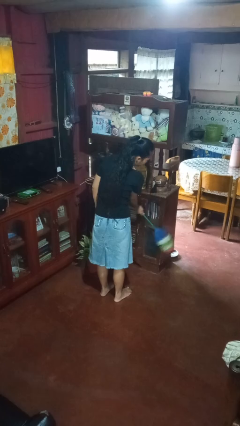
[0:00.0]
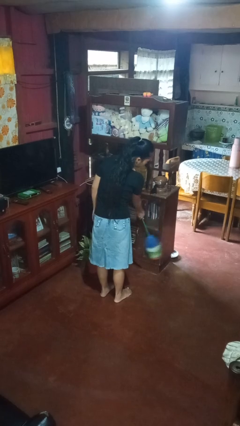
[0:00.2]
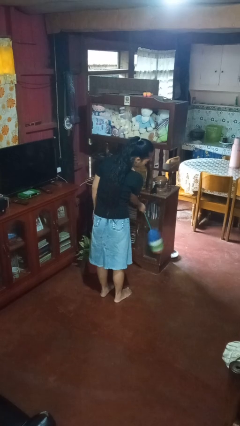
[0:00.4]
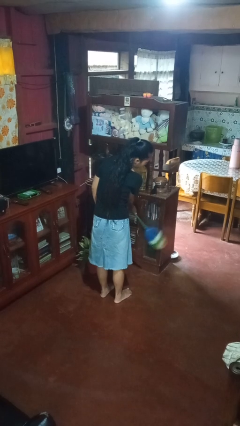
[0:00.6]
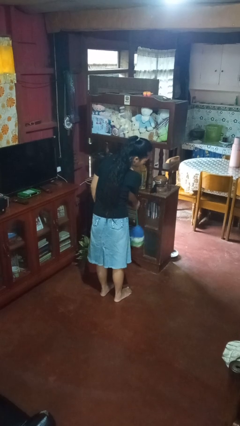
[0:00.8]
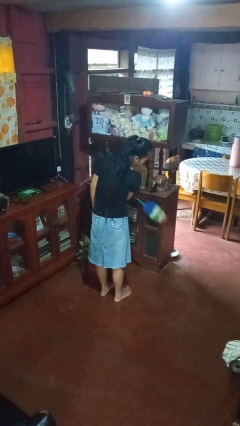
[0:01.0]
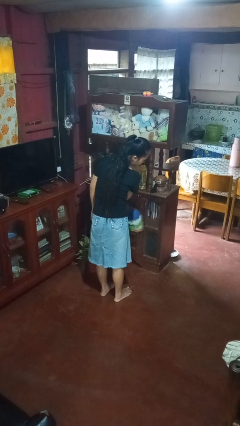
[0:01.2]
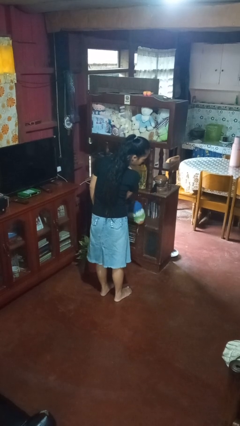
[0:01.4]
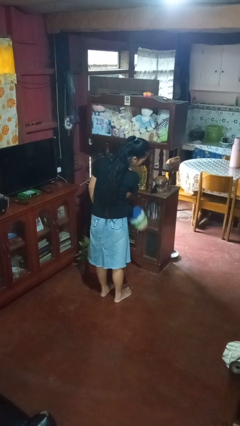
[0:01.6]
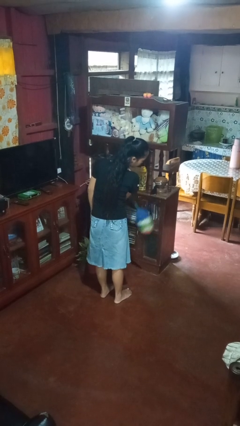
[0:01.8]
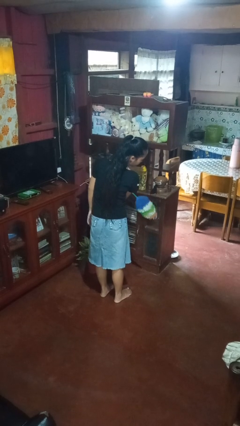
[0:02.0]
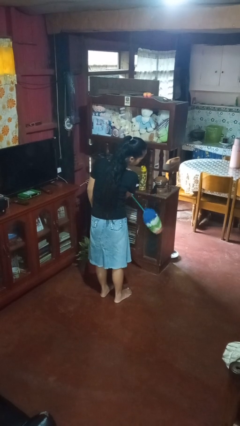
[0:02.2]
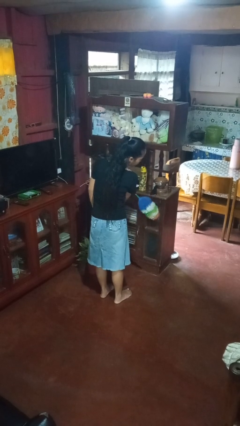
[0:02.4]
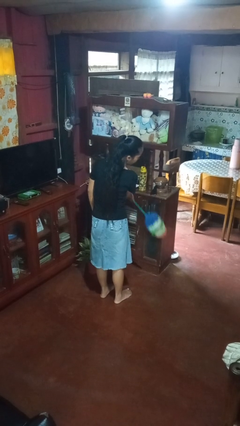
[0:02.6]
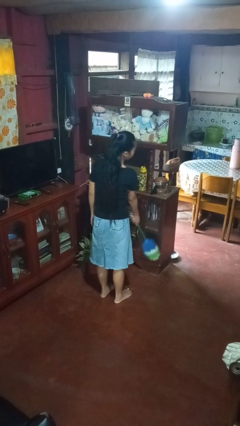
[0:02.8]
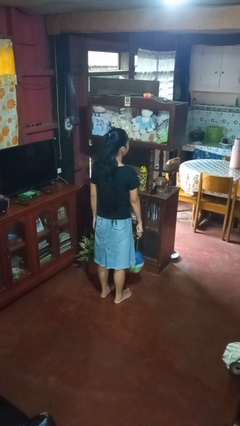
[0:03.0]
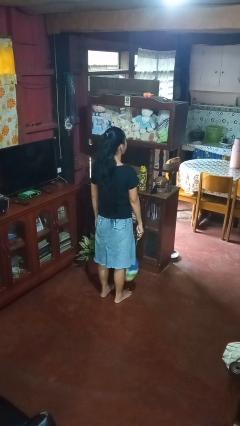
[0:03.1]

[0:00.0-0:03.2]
person dusts furniture

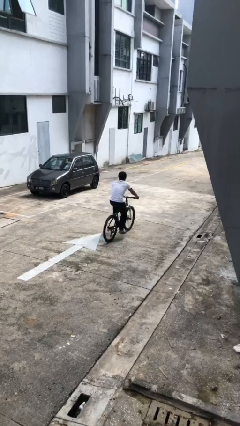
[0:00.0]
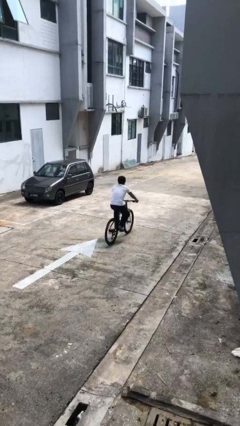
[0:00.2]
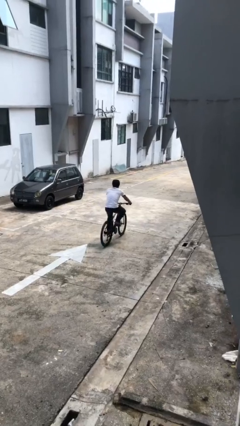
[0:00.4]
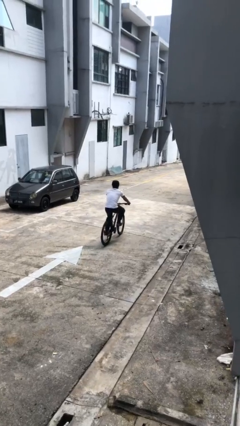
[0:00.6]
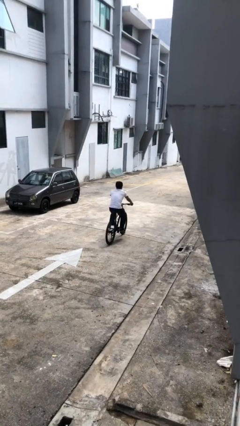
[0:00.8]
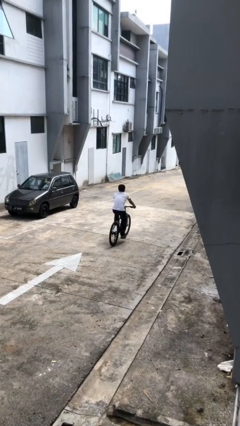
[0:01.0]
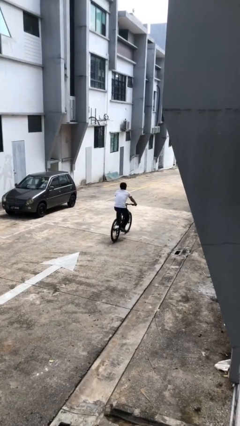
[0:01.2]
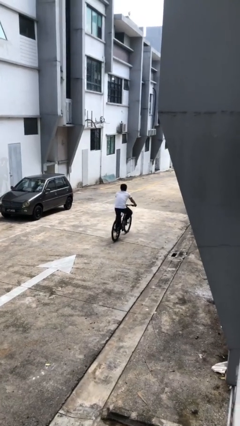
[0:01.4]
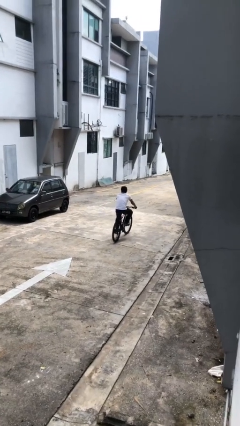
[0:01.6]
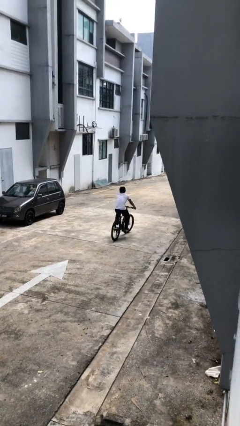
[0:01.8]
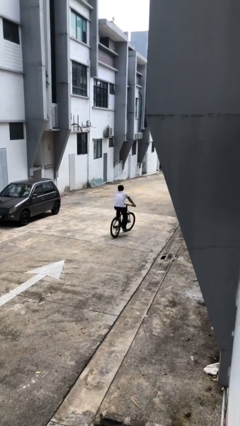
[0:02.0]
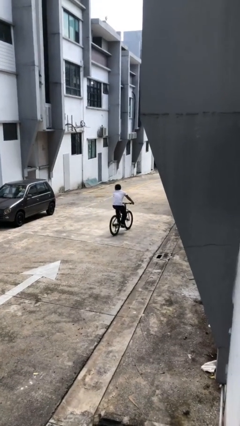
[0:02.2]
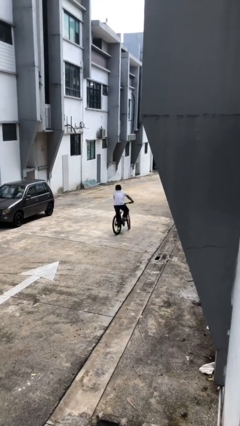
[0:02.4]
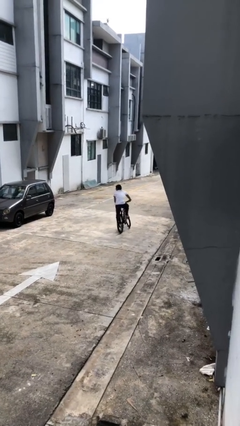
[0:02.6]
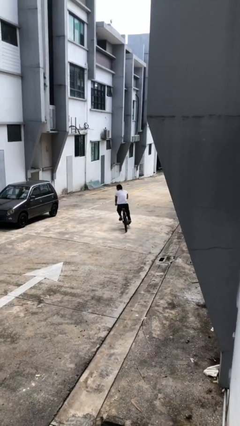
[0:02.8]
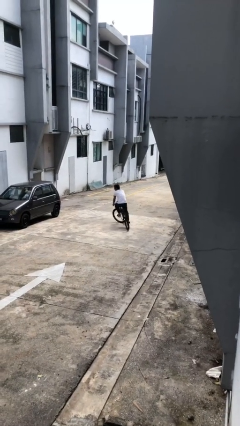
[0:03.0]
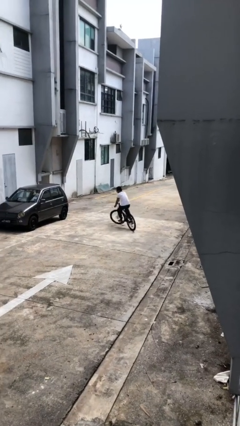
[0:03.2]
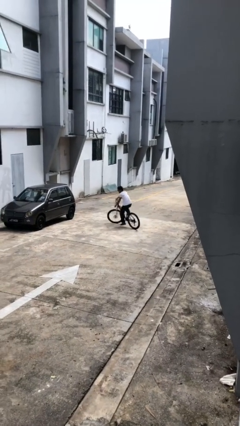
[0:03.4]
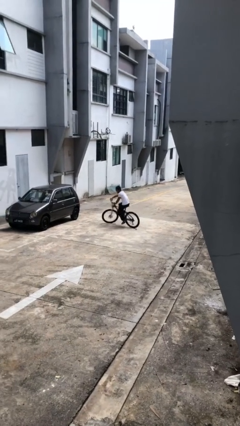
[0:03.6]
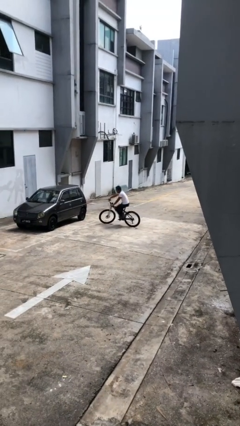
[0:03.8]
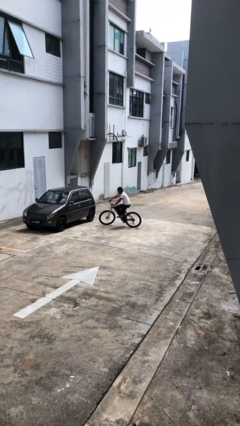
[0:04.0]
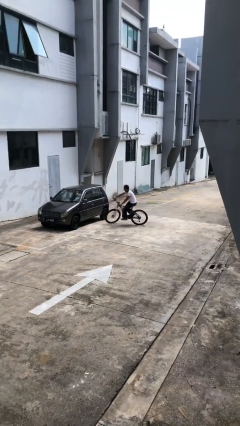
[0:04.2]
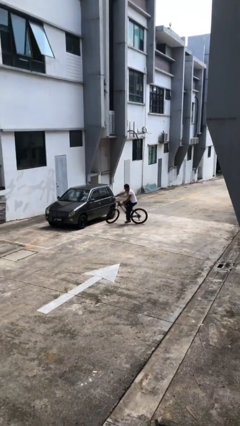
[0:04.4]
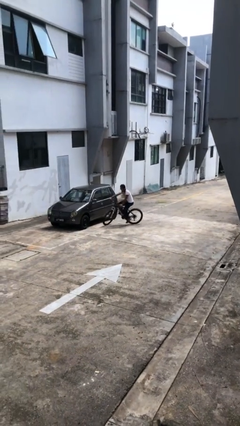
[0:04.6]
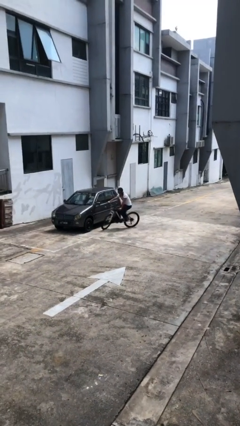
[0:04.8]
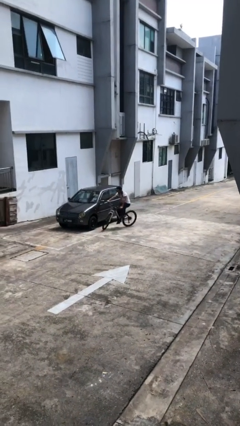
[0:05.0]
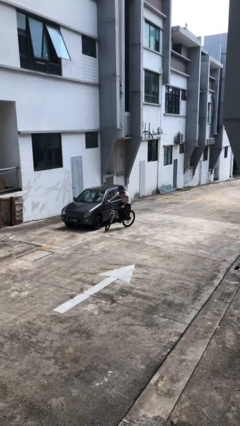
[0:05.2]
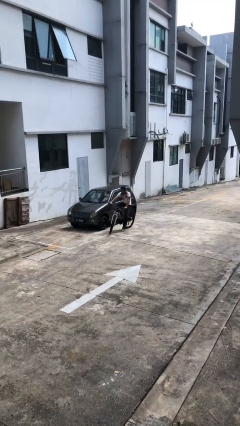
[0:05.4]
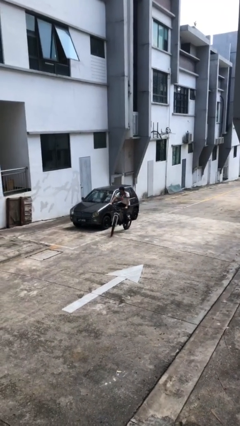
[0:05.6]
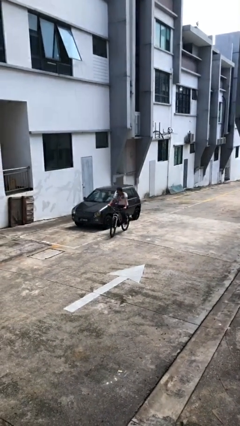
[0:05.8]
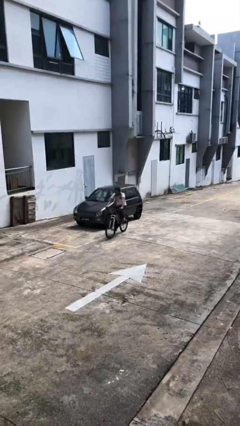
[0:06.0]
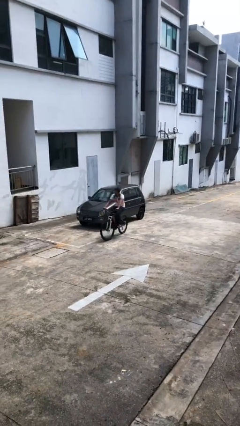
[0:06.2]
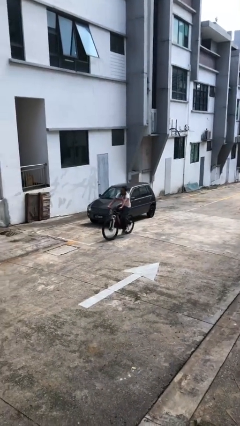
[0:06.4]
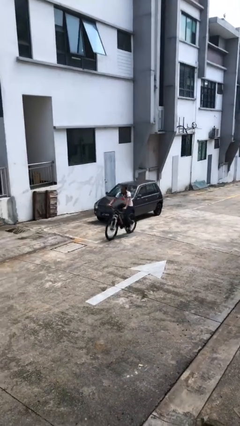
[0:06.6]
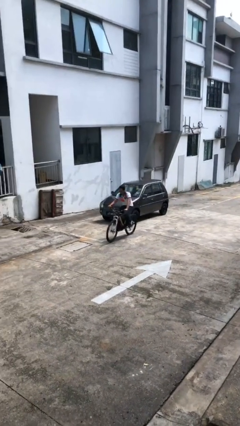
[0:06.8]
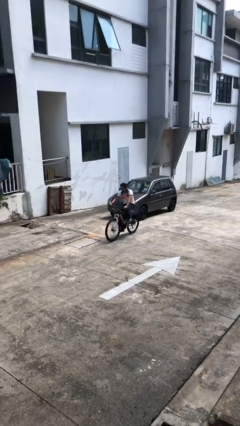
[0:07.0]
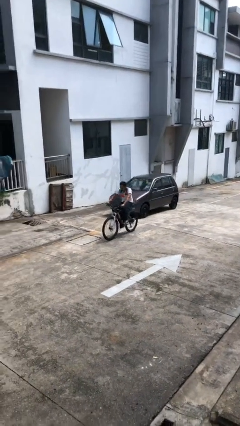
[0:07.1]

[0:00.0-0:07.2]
person rides bicycle

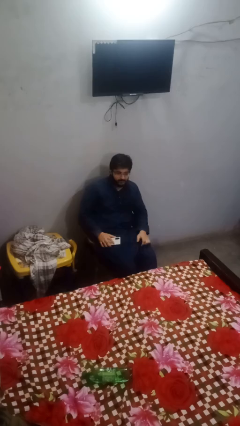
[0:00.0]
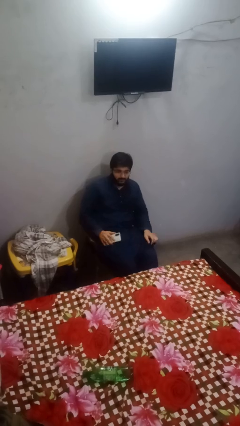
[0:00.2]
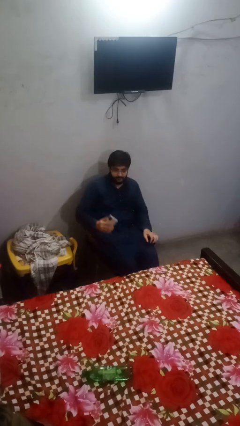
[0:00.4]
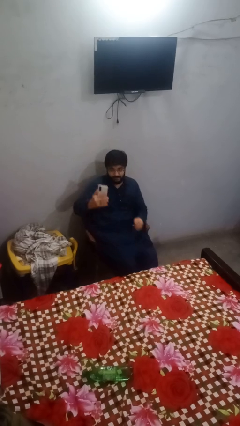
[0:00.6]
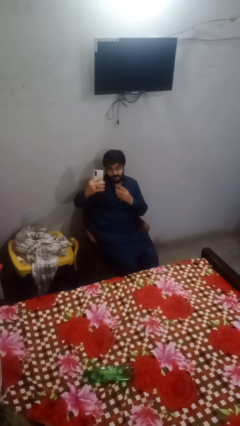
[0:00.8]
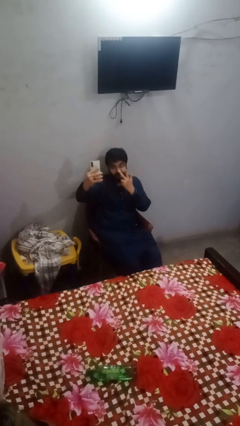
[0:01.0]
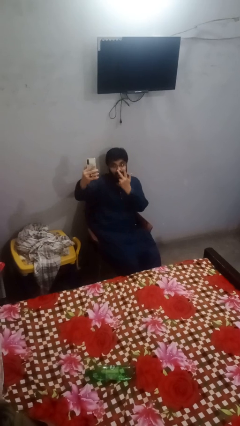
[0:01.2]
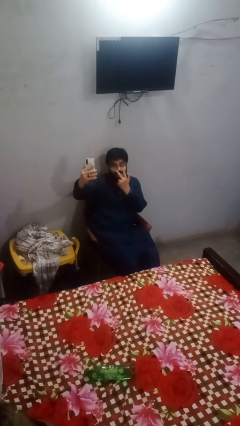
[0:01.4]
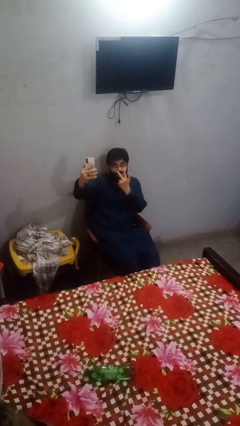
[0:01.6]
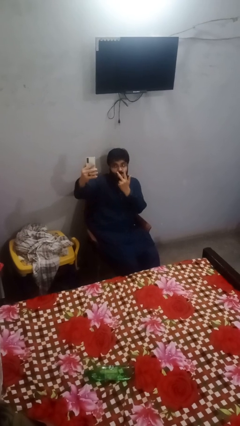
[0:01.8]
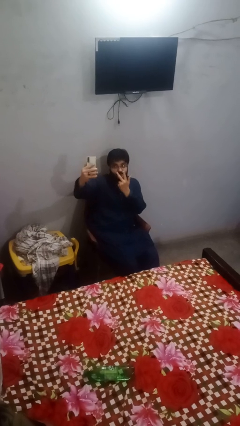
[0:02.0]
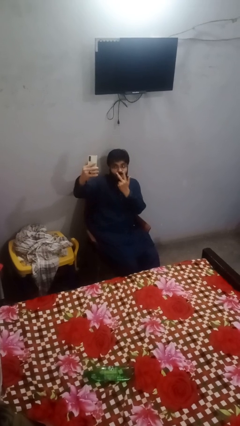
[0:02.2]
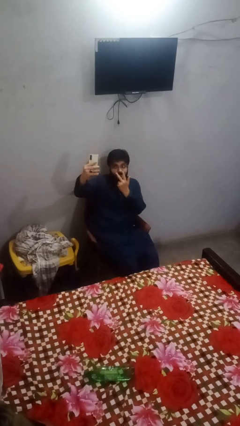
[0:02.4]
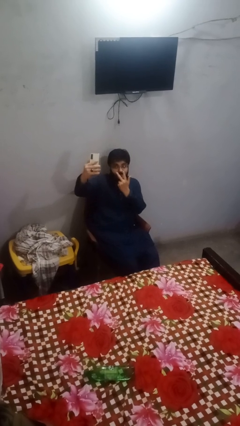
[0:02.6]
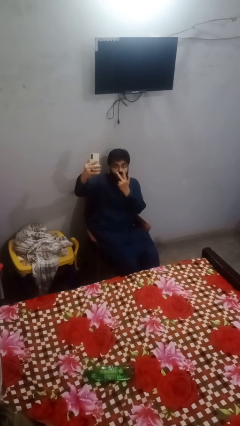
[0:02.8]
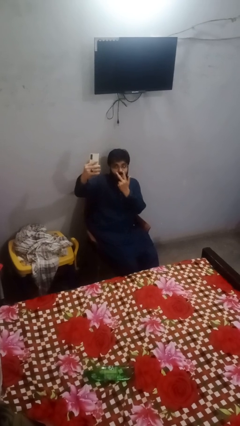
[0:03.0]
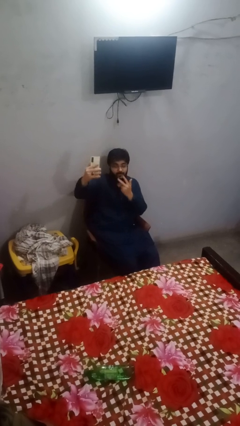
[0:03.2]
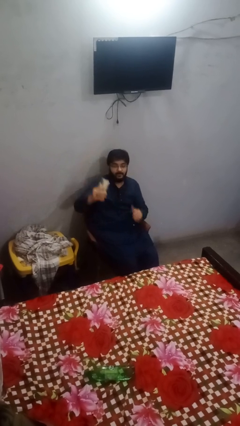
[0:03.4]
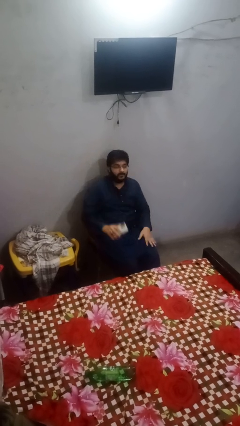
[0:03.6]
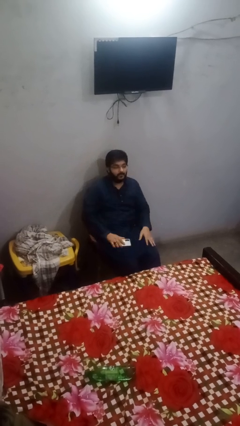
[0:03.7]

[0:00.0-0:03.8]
person takes selfie

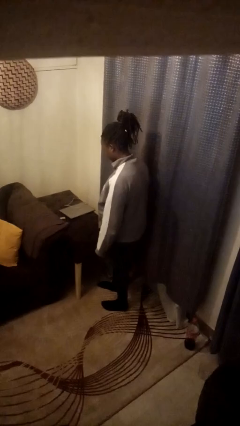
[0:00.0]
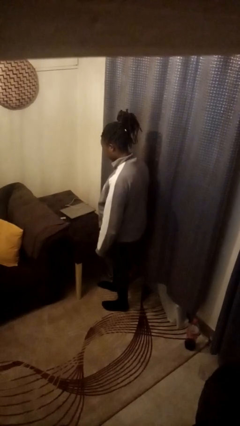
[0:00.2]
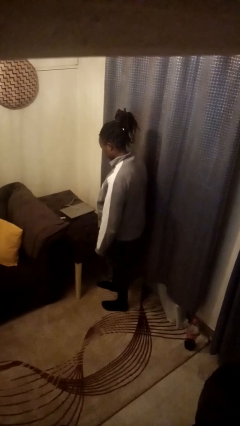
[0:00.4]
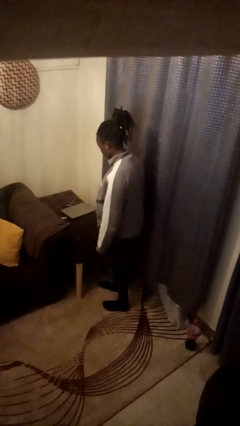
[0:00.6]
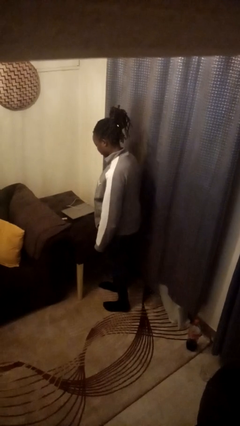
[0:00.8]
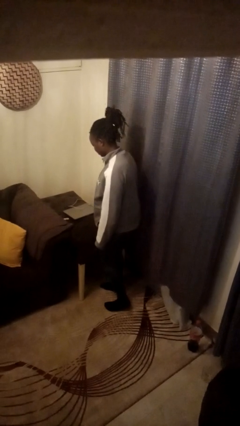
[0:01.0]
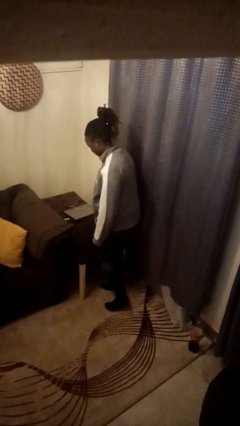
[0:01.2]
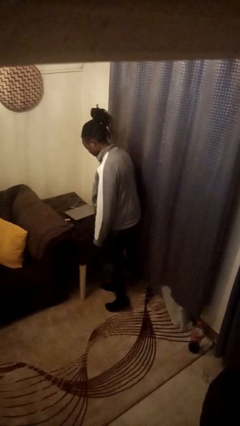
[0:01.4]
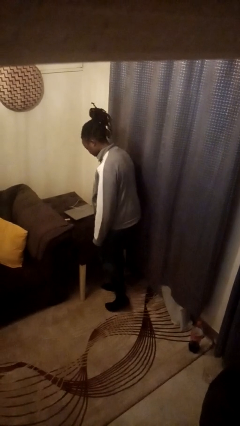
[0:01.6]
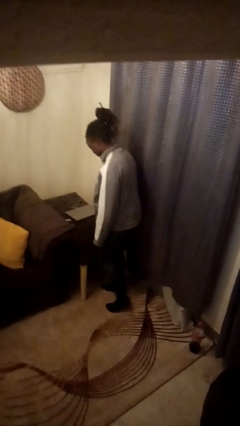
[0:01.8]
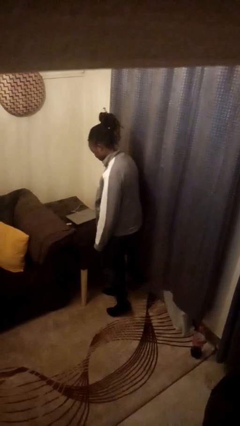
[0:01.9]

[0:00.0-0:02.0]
person bumps into table

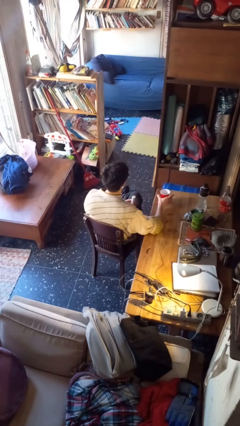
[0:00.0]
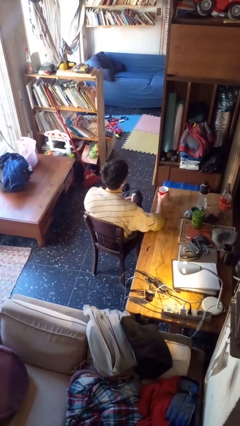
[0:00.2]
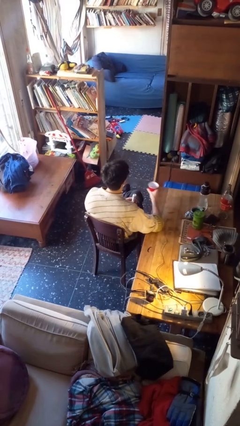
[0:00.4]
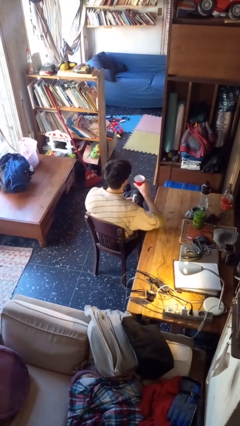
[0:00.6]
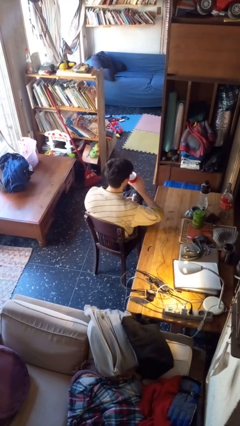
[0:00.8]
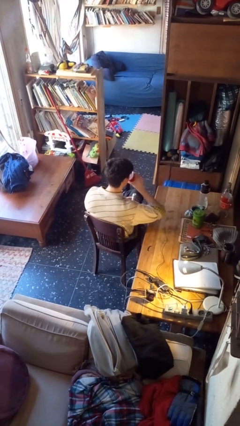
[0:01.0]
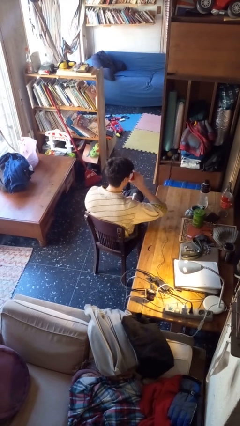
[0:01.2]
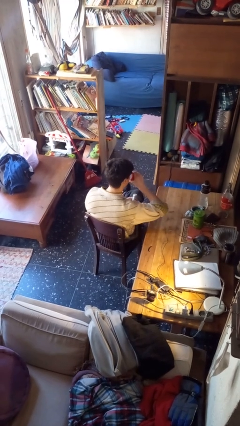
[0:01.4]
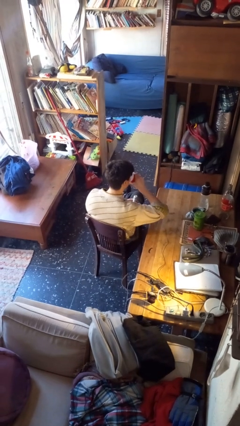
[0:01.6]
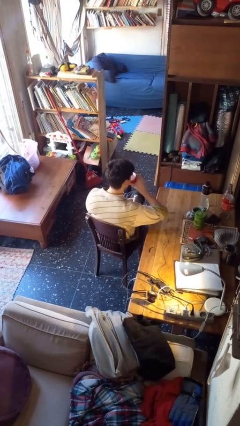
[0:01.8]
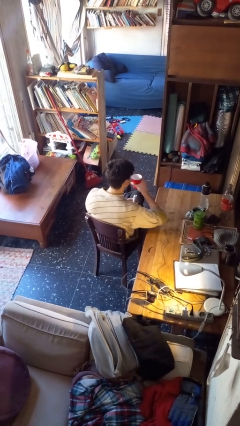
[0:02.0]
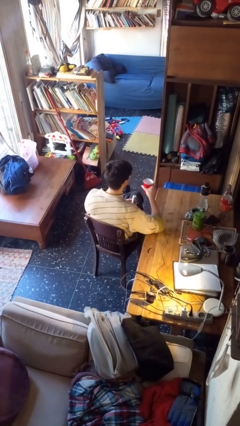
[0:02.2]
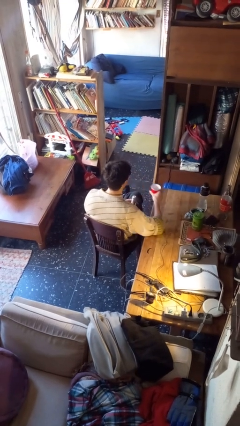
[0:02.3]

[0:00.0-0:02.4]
person drinks from cup
